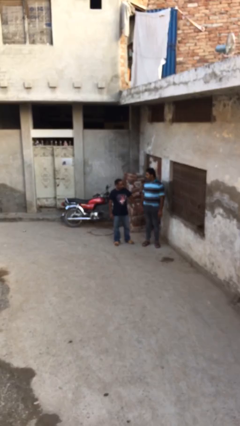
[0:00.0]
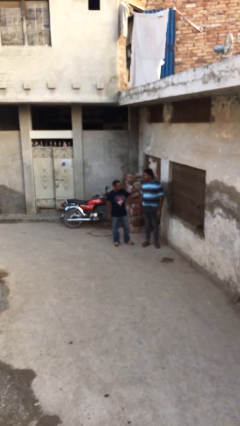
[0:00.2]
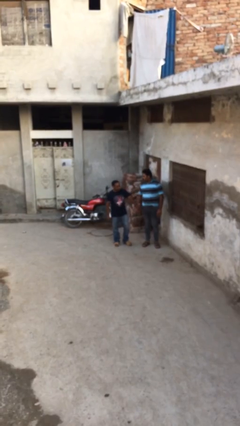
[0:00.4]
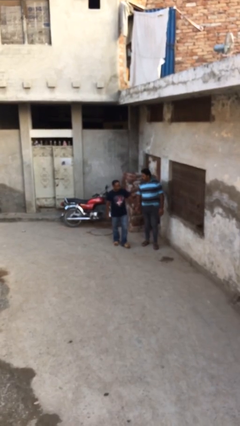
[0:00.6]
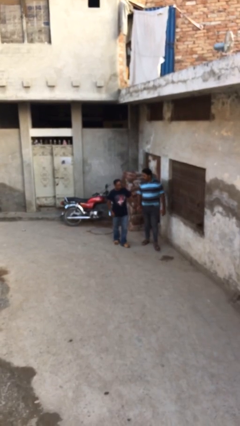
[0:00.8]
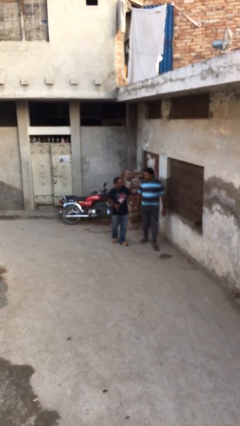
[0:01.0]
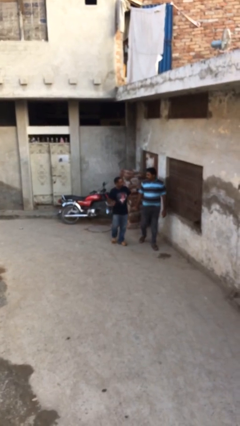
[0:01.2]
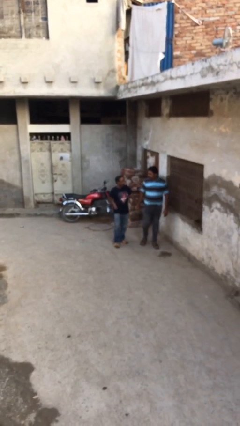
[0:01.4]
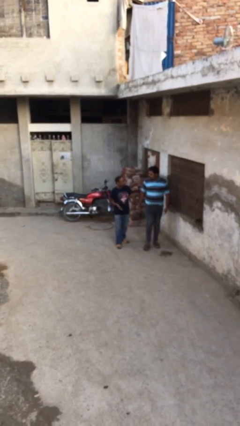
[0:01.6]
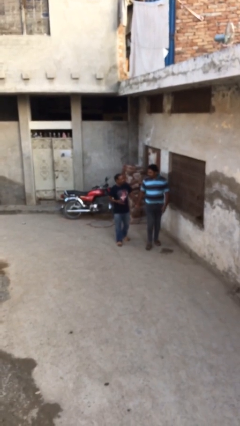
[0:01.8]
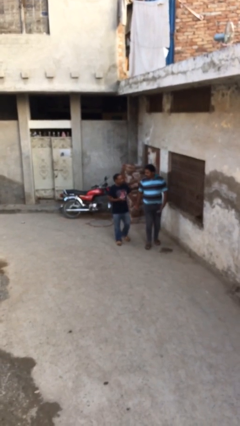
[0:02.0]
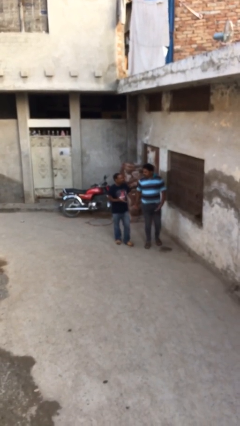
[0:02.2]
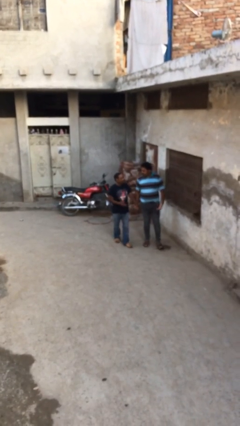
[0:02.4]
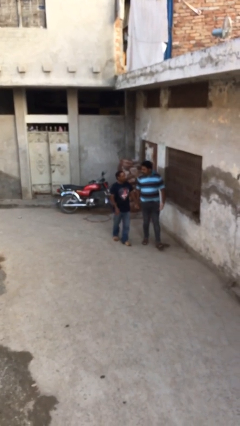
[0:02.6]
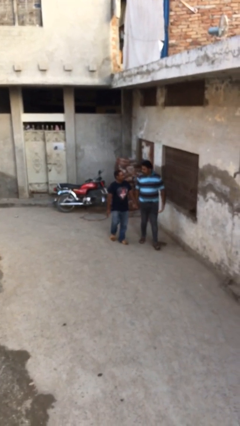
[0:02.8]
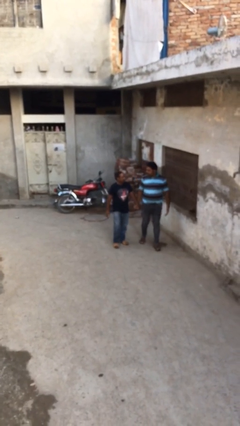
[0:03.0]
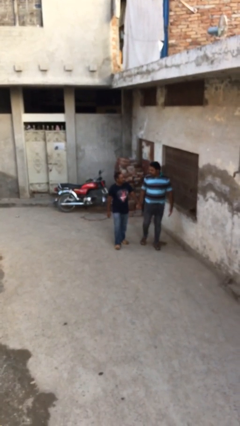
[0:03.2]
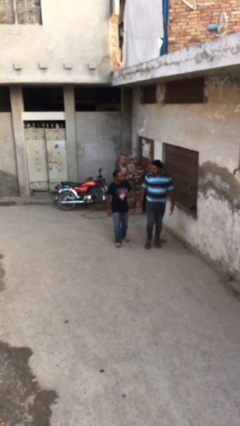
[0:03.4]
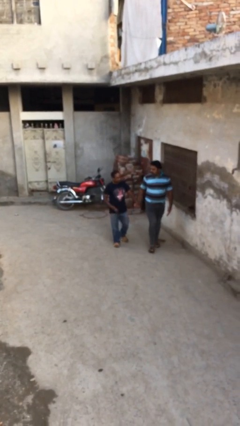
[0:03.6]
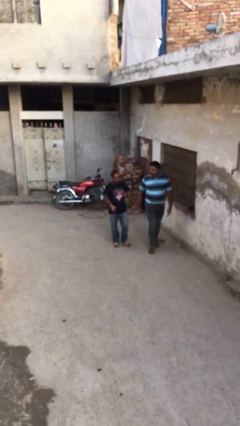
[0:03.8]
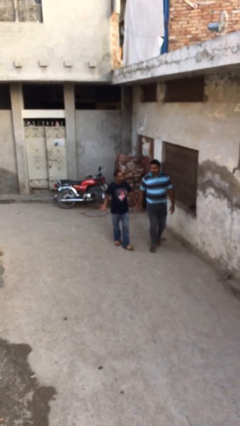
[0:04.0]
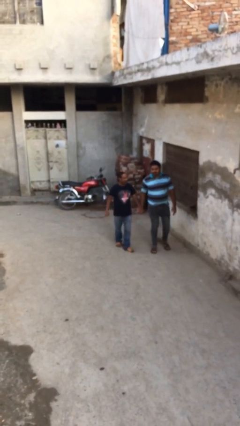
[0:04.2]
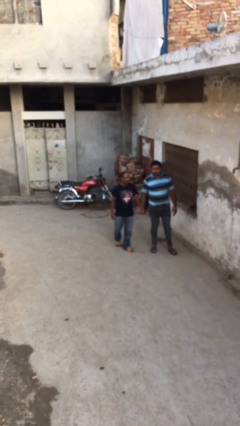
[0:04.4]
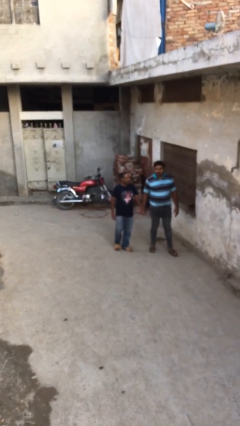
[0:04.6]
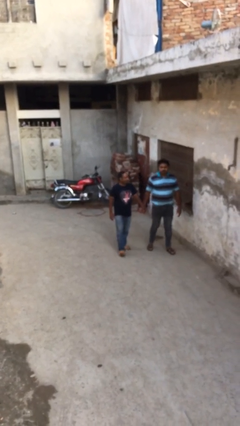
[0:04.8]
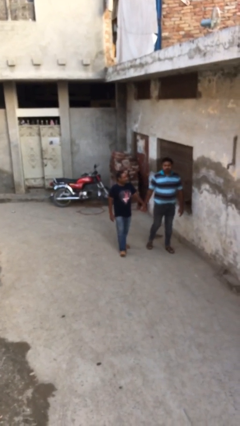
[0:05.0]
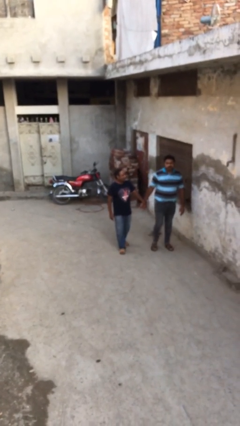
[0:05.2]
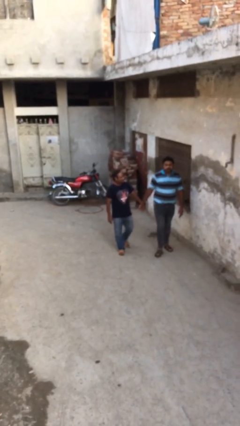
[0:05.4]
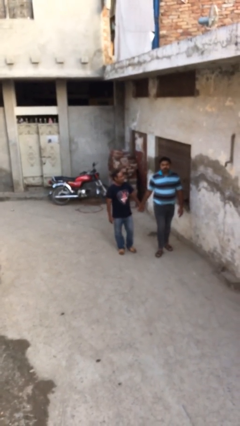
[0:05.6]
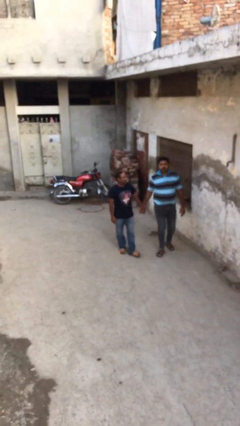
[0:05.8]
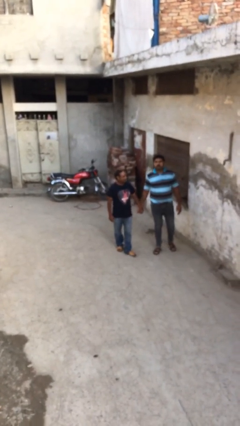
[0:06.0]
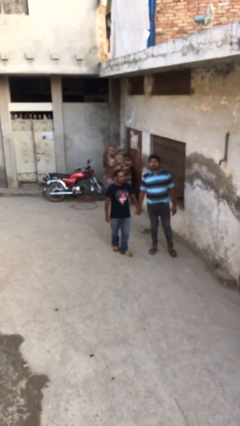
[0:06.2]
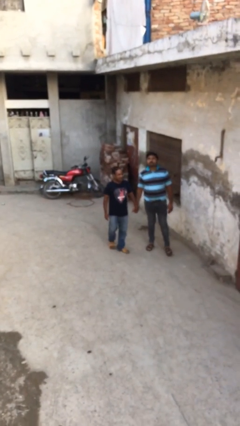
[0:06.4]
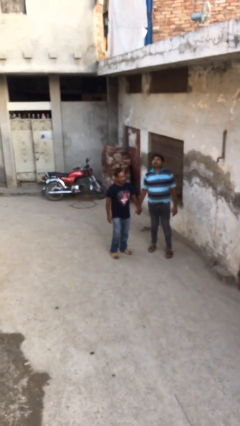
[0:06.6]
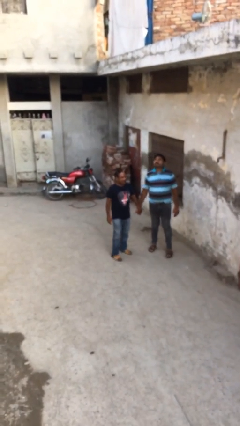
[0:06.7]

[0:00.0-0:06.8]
person holds hand

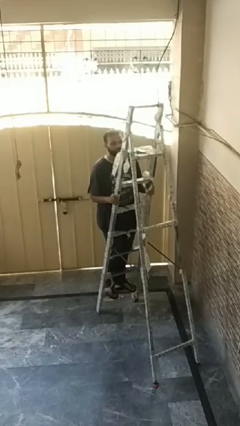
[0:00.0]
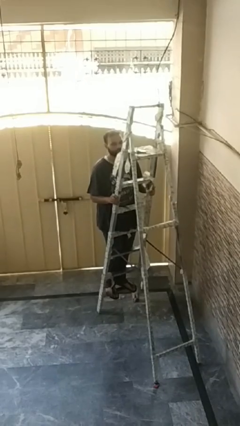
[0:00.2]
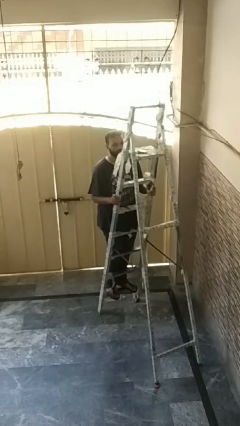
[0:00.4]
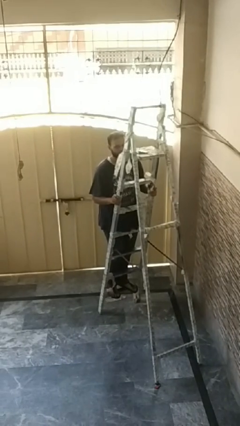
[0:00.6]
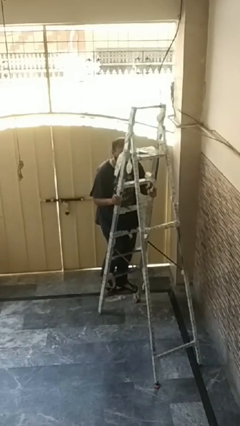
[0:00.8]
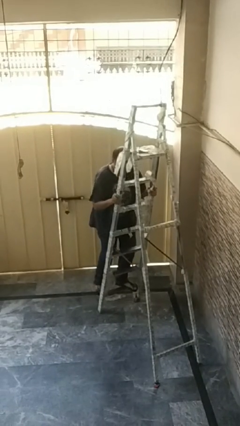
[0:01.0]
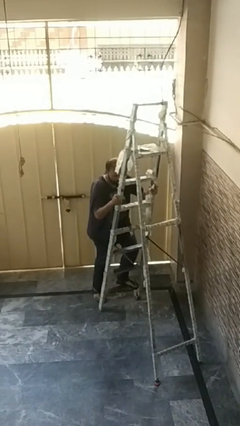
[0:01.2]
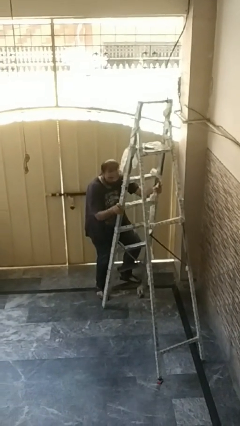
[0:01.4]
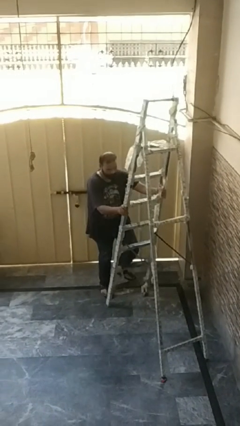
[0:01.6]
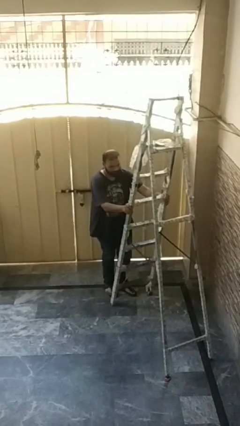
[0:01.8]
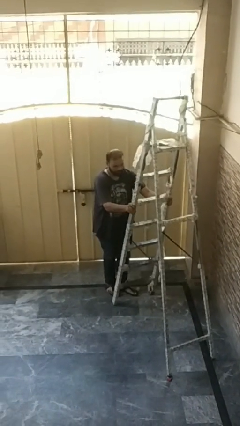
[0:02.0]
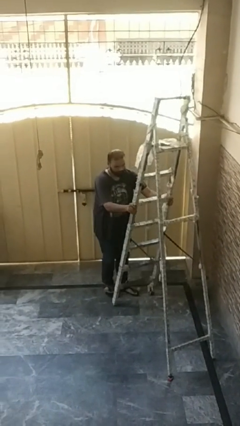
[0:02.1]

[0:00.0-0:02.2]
person climbs down ladder

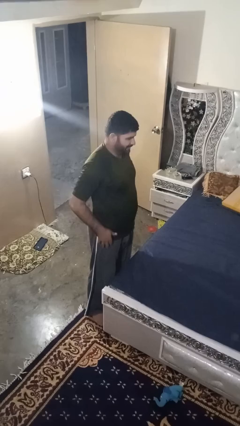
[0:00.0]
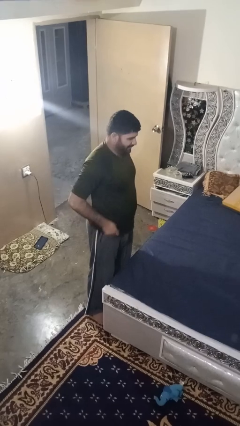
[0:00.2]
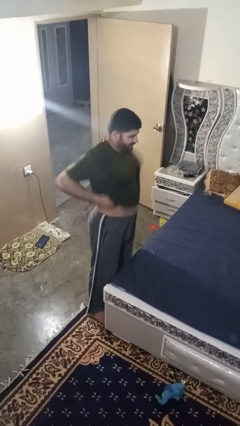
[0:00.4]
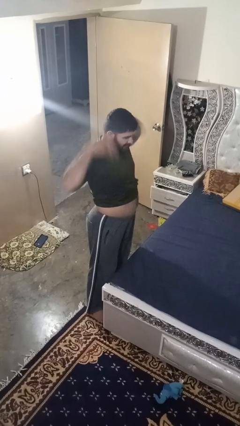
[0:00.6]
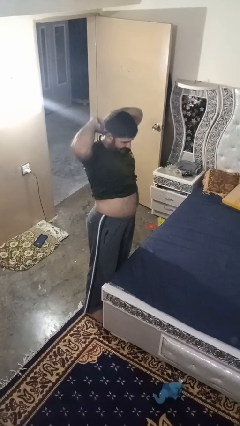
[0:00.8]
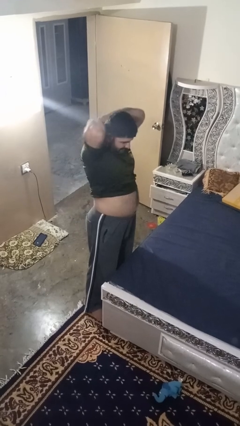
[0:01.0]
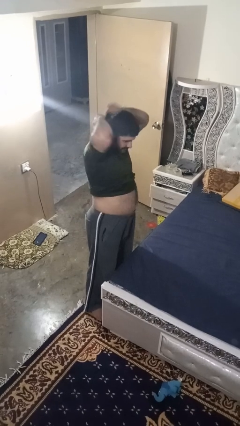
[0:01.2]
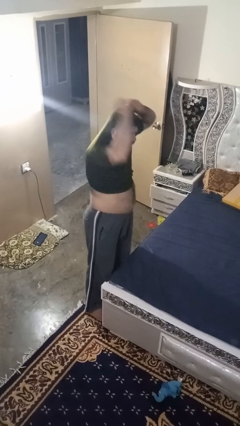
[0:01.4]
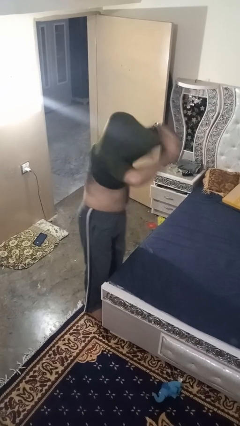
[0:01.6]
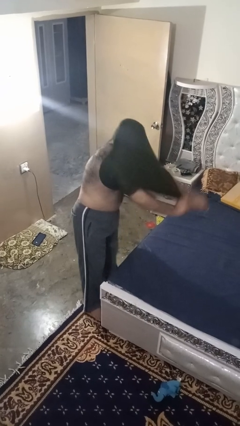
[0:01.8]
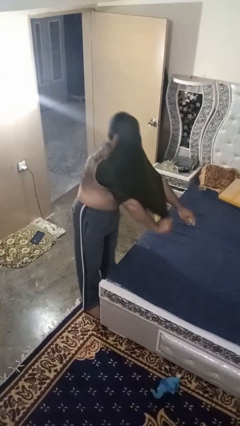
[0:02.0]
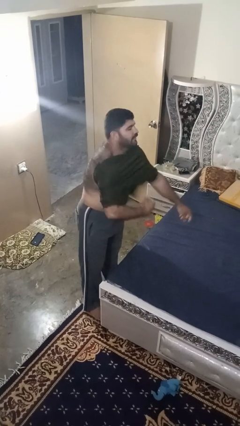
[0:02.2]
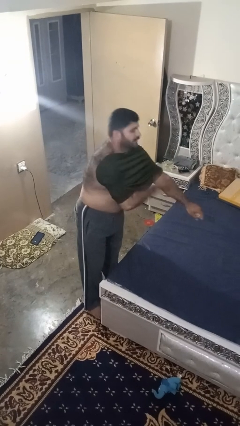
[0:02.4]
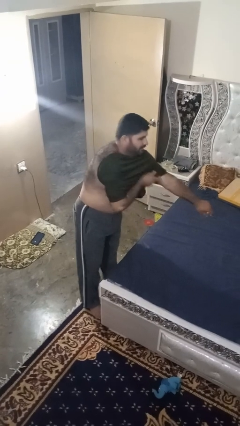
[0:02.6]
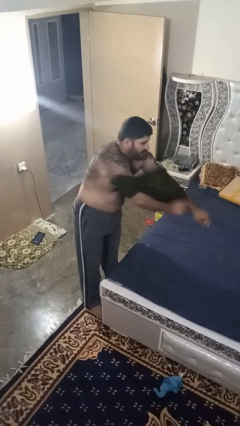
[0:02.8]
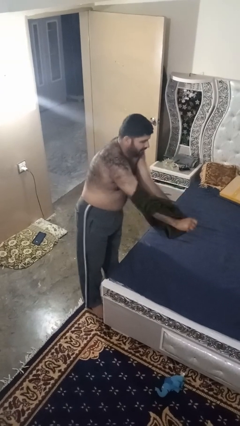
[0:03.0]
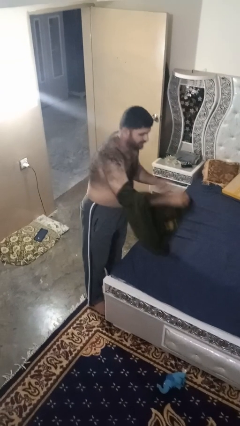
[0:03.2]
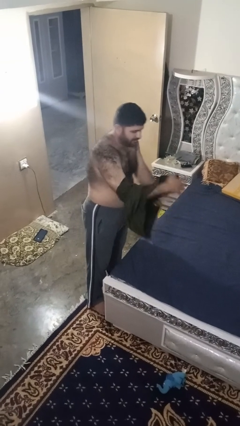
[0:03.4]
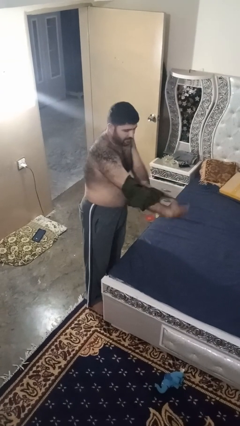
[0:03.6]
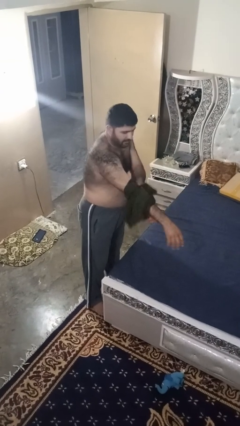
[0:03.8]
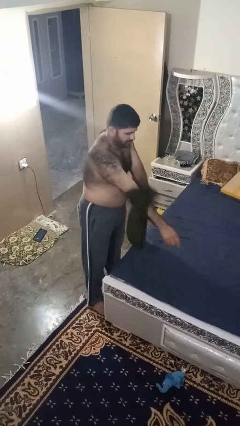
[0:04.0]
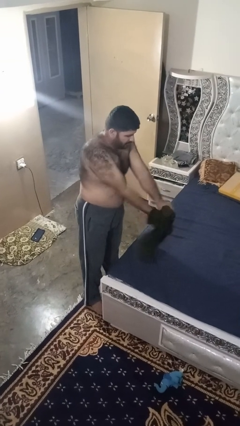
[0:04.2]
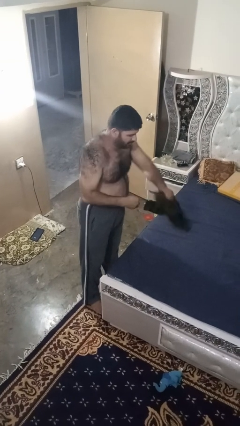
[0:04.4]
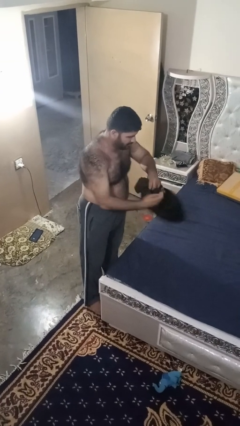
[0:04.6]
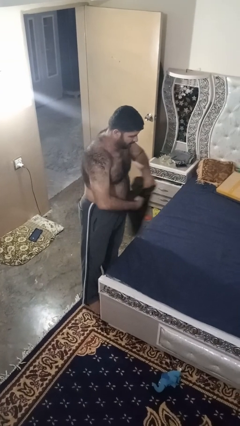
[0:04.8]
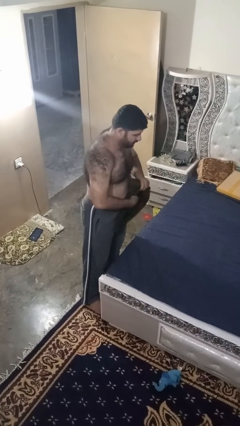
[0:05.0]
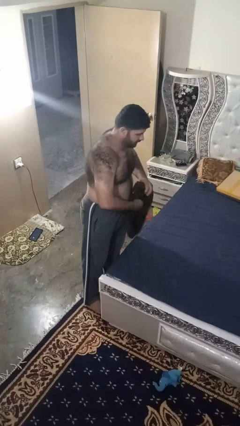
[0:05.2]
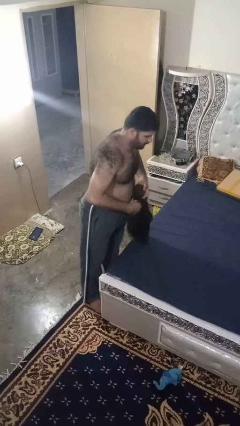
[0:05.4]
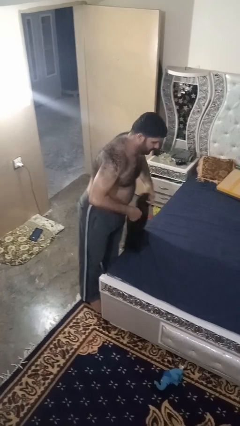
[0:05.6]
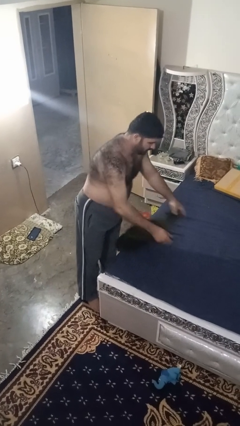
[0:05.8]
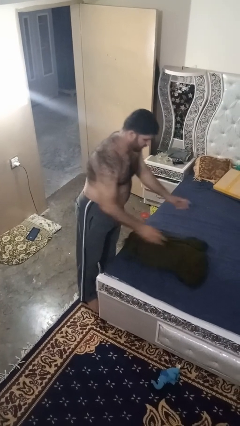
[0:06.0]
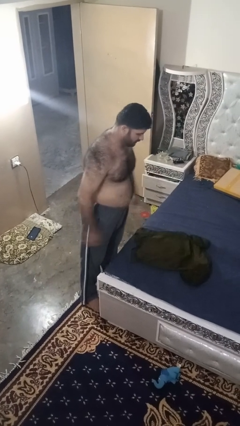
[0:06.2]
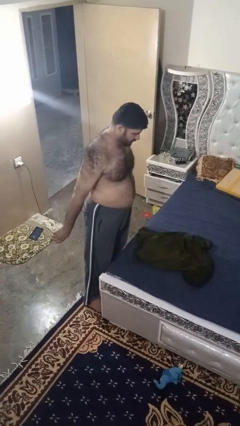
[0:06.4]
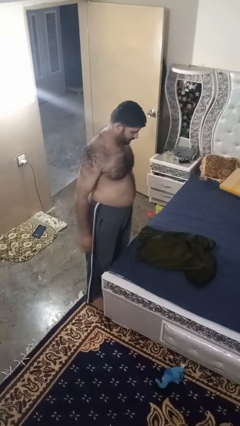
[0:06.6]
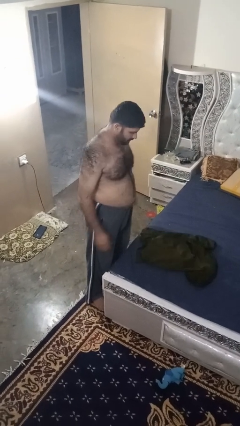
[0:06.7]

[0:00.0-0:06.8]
person takes off shirt

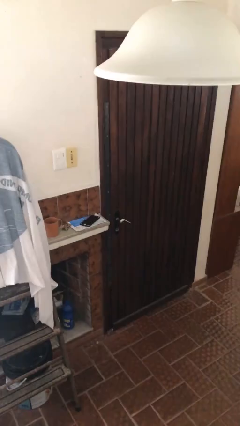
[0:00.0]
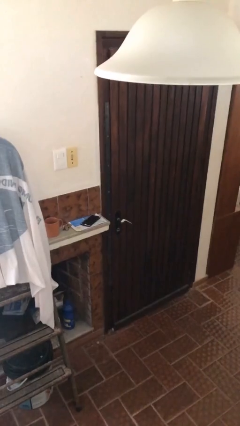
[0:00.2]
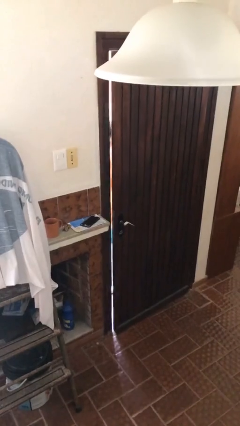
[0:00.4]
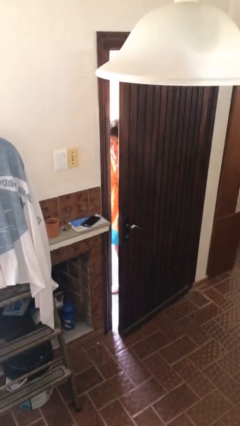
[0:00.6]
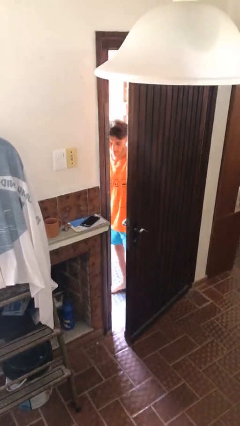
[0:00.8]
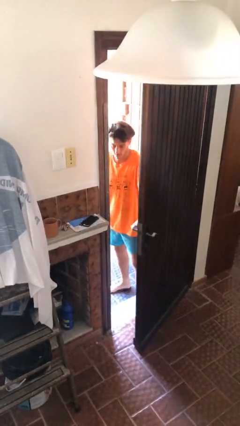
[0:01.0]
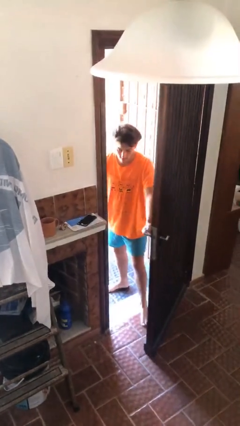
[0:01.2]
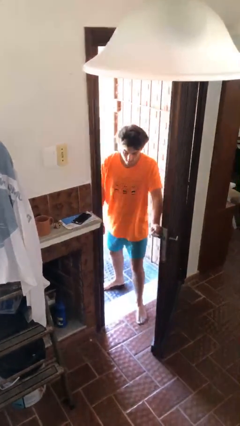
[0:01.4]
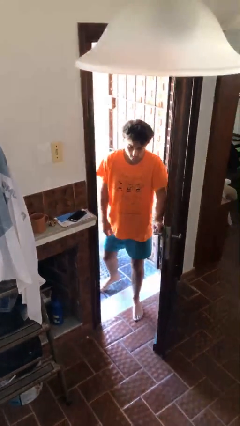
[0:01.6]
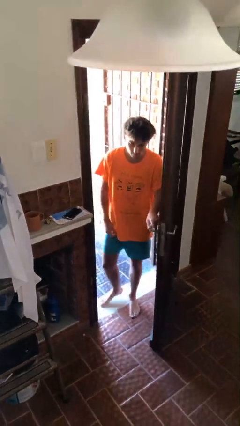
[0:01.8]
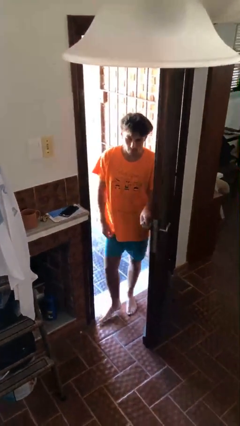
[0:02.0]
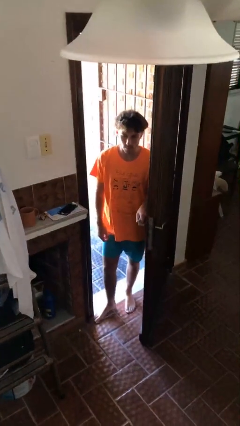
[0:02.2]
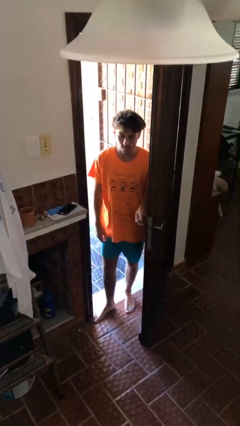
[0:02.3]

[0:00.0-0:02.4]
person opens facility door
